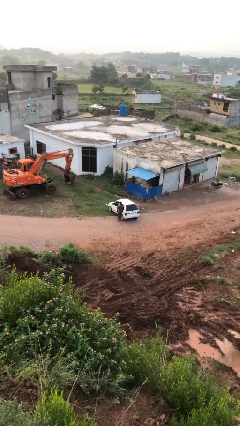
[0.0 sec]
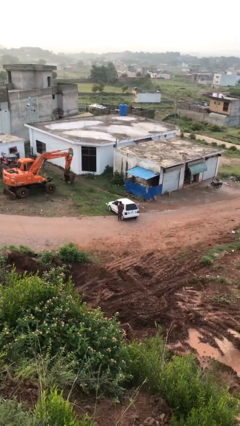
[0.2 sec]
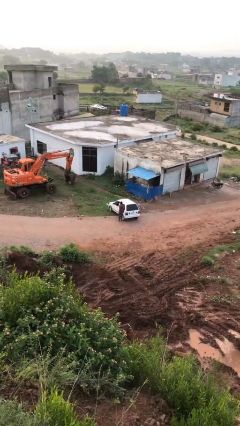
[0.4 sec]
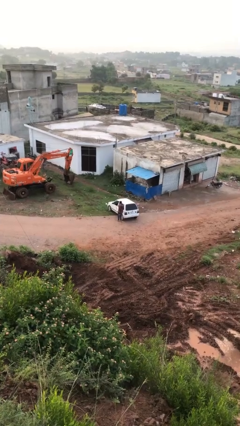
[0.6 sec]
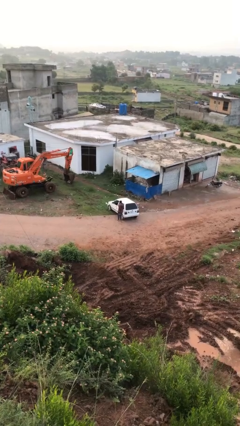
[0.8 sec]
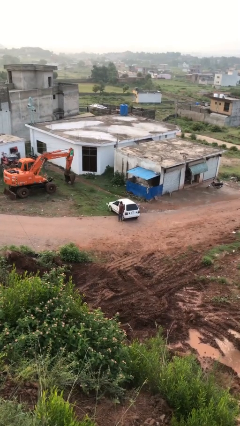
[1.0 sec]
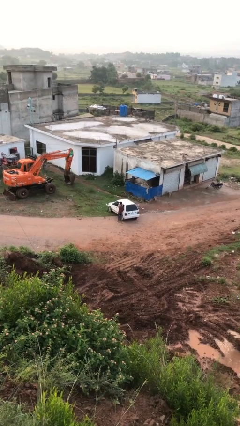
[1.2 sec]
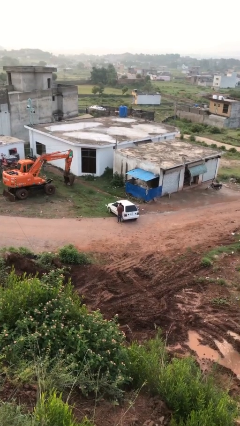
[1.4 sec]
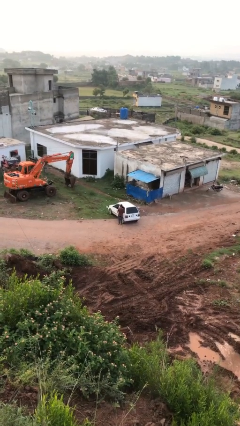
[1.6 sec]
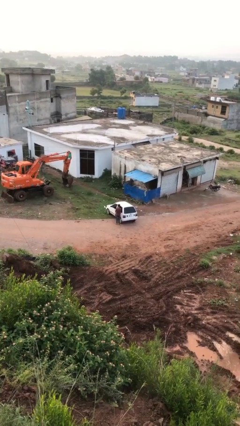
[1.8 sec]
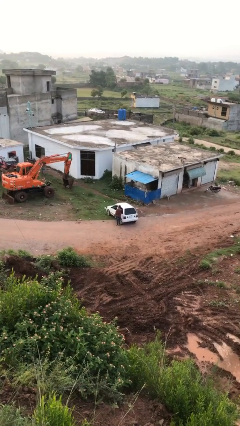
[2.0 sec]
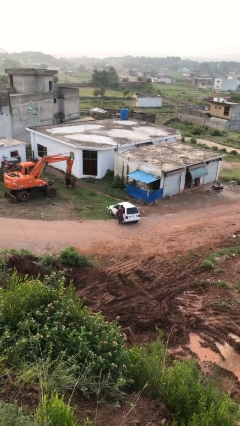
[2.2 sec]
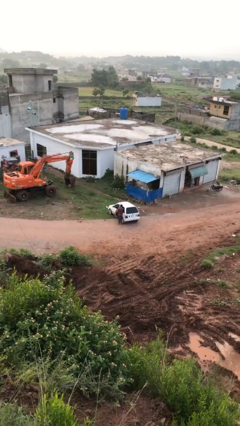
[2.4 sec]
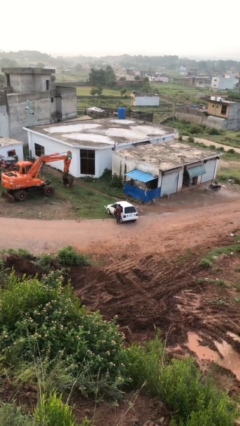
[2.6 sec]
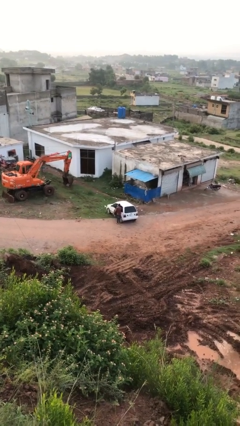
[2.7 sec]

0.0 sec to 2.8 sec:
person opens car door

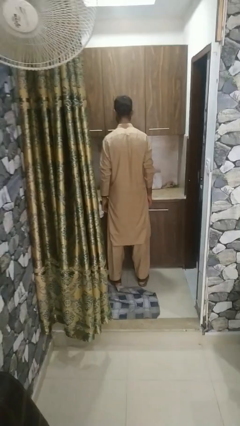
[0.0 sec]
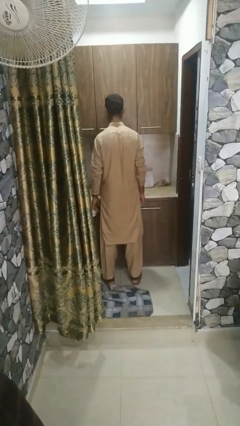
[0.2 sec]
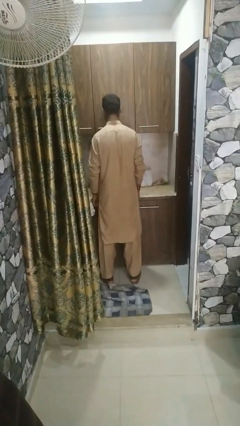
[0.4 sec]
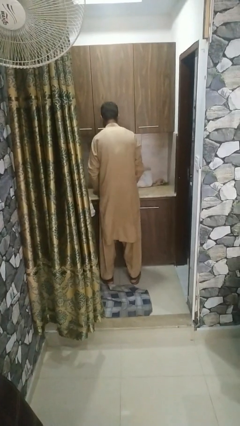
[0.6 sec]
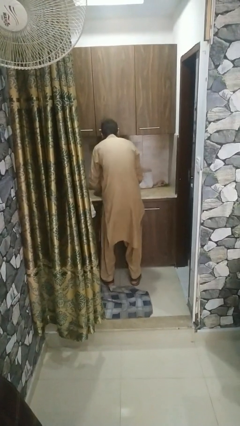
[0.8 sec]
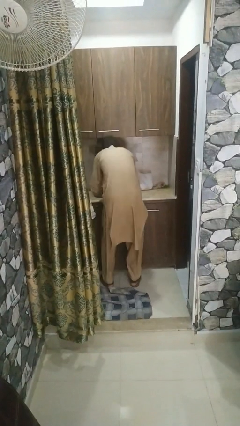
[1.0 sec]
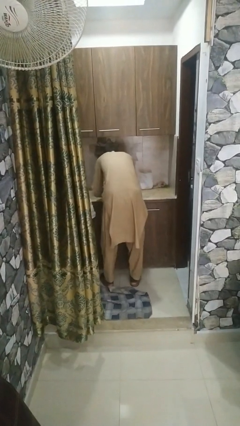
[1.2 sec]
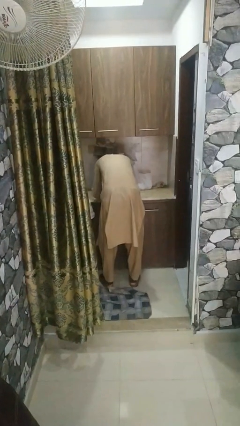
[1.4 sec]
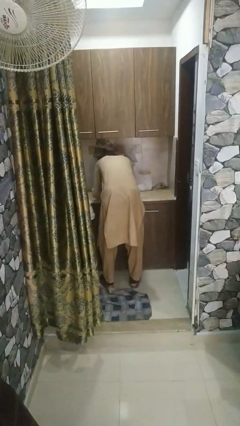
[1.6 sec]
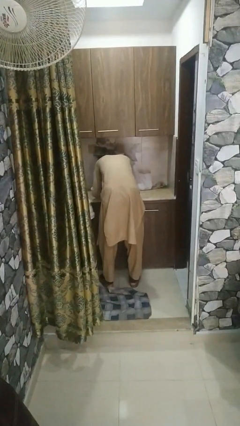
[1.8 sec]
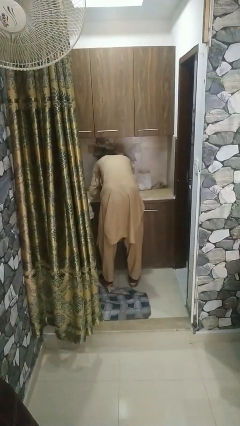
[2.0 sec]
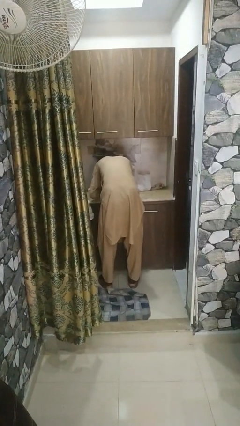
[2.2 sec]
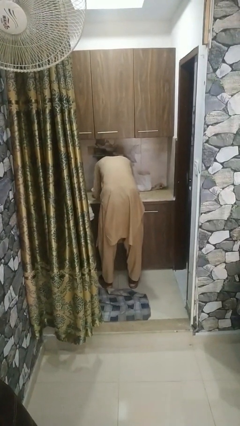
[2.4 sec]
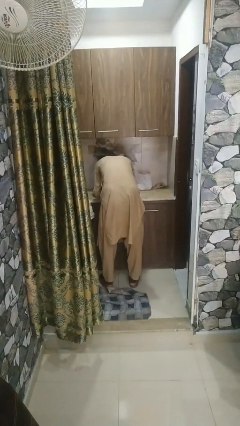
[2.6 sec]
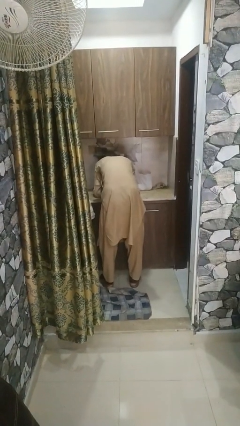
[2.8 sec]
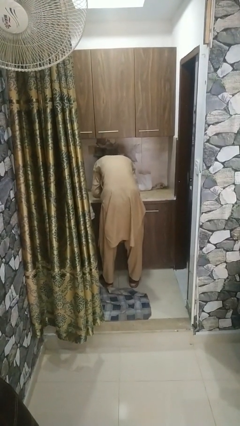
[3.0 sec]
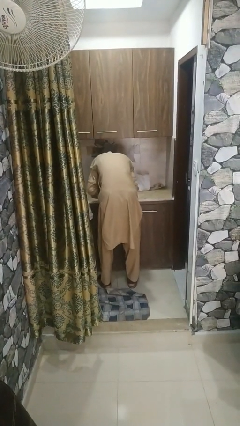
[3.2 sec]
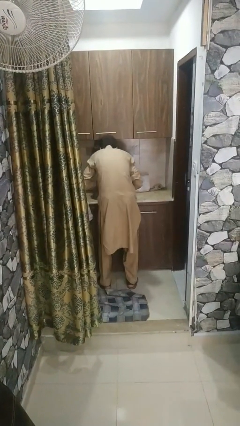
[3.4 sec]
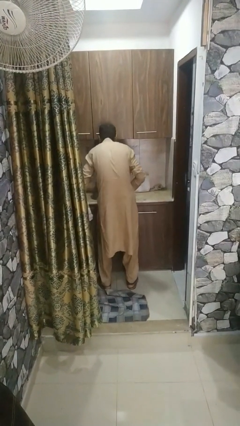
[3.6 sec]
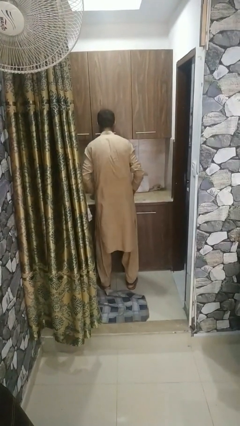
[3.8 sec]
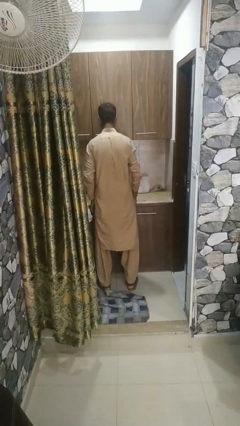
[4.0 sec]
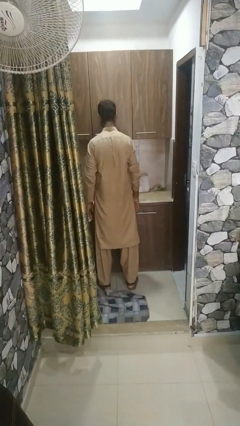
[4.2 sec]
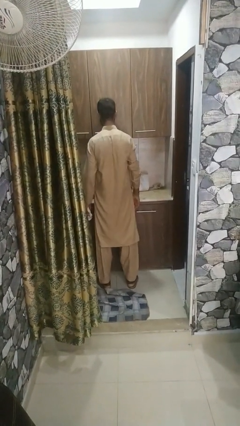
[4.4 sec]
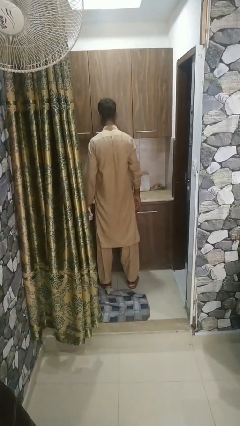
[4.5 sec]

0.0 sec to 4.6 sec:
person washes face

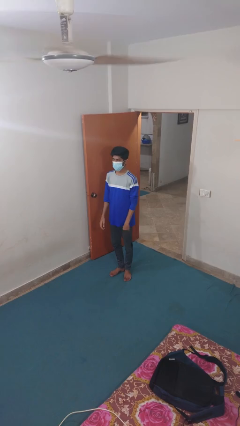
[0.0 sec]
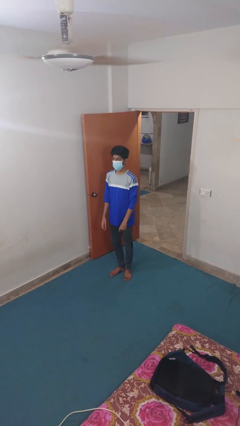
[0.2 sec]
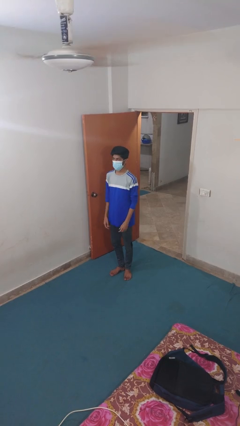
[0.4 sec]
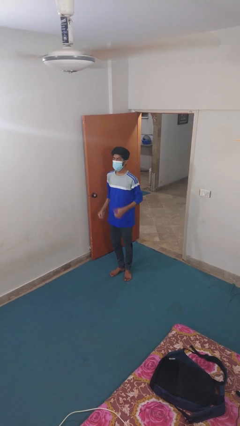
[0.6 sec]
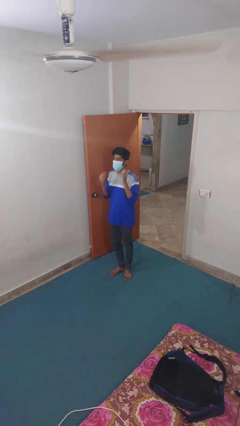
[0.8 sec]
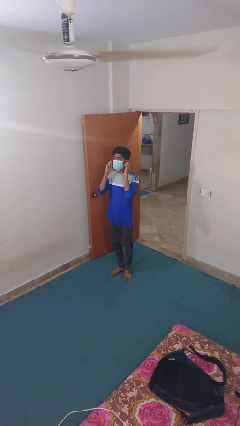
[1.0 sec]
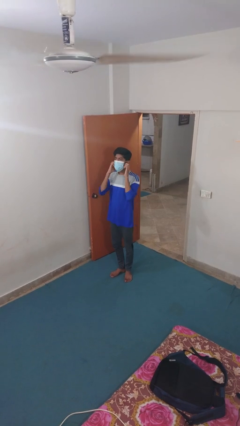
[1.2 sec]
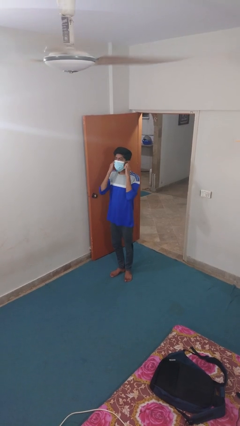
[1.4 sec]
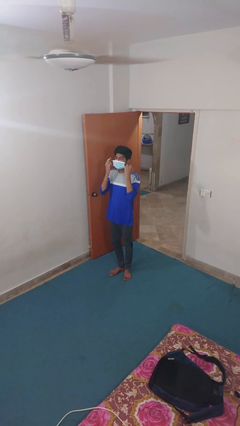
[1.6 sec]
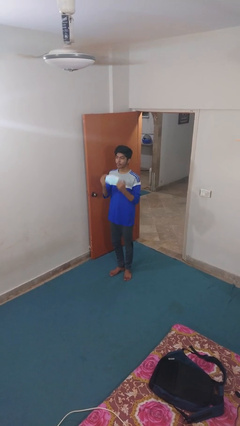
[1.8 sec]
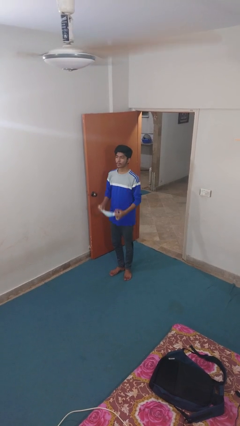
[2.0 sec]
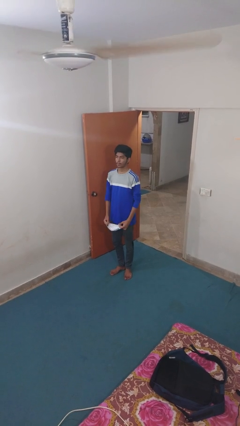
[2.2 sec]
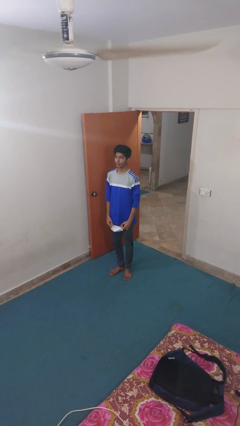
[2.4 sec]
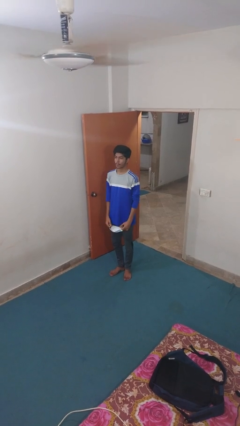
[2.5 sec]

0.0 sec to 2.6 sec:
person takes off facemask

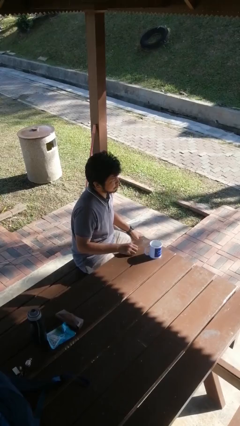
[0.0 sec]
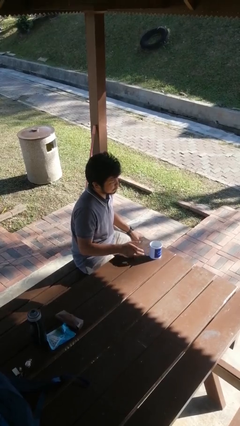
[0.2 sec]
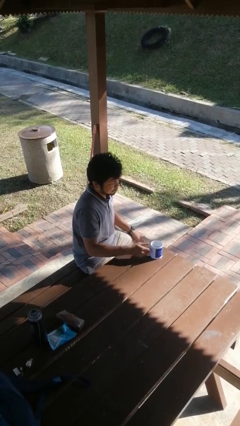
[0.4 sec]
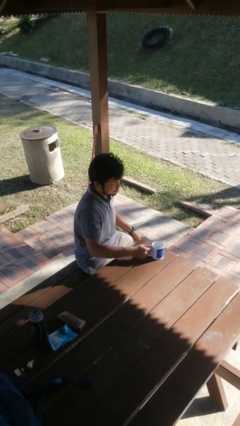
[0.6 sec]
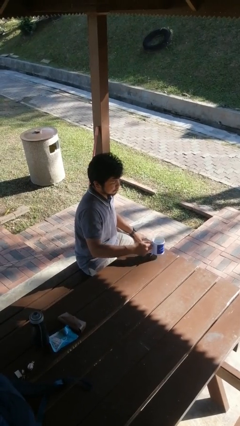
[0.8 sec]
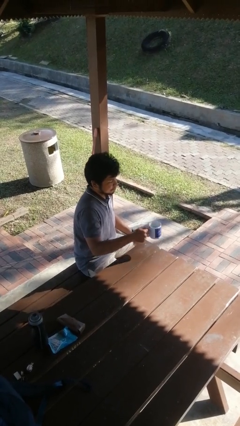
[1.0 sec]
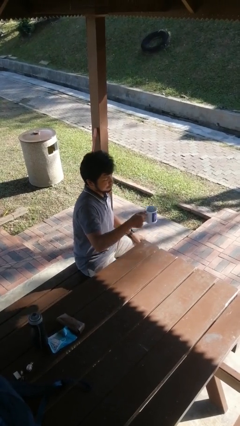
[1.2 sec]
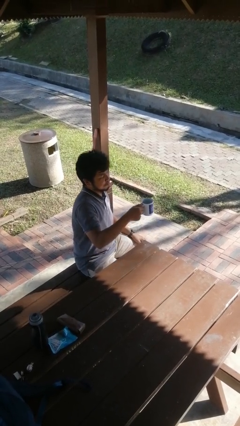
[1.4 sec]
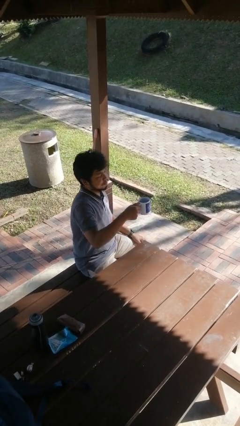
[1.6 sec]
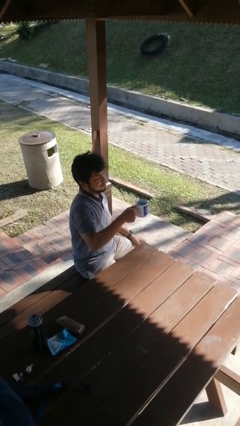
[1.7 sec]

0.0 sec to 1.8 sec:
person picks up object from table

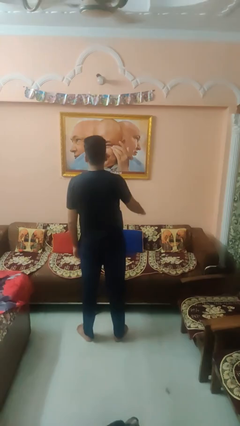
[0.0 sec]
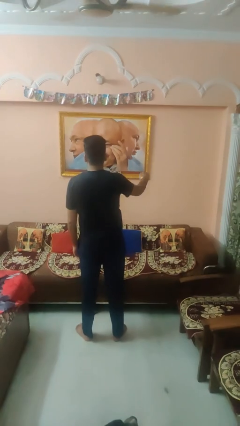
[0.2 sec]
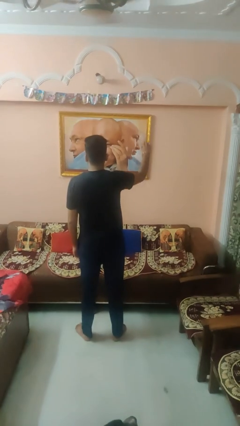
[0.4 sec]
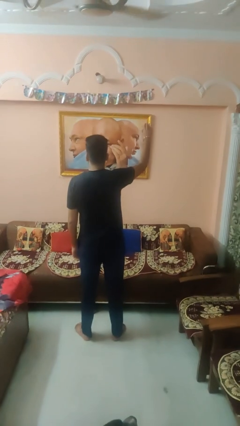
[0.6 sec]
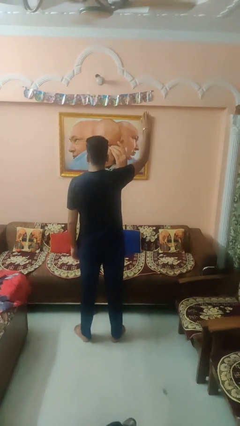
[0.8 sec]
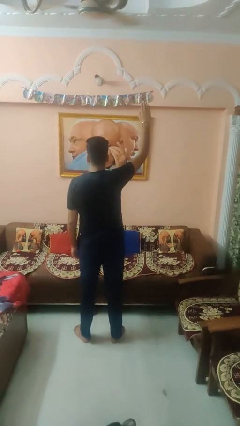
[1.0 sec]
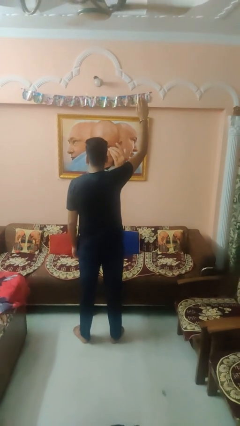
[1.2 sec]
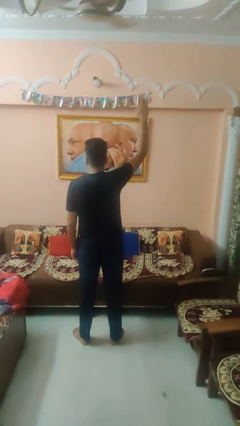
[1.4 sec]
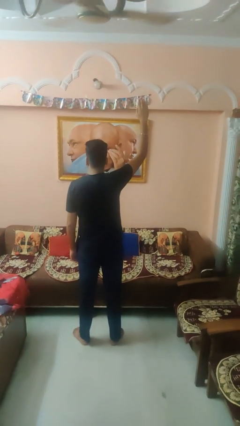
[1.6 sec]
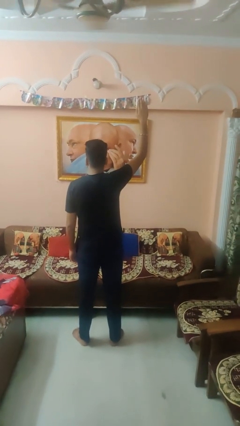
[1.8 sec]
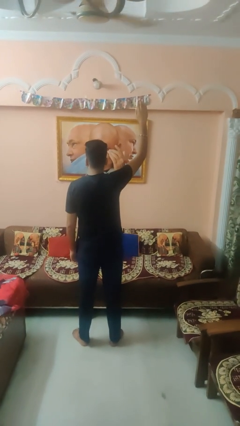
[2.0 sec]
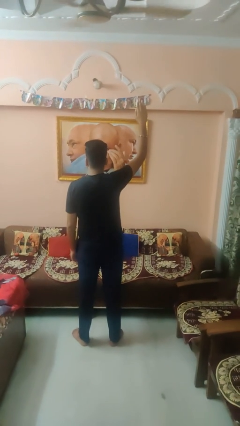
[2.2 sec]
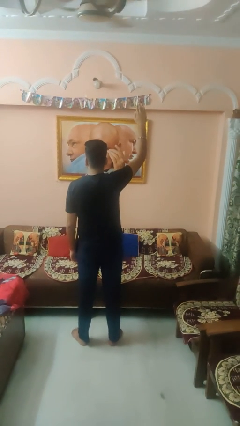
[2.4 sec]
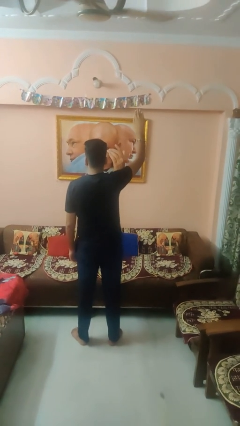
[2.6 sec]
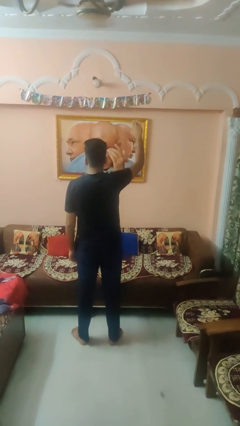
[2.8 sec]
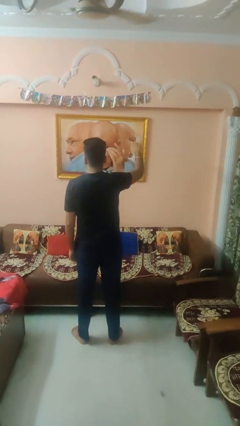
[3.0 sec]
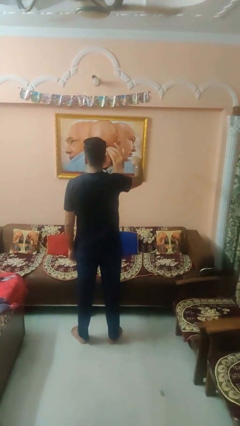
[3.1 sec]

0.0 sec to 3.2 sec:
person gestures raise hand

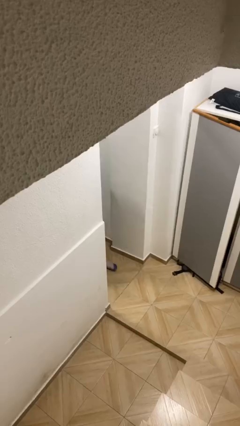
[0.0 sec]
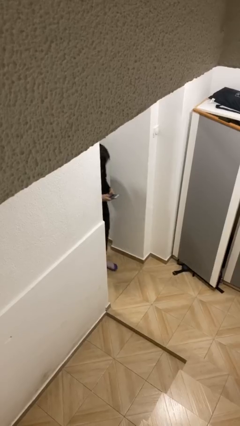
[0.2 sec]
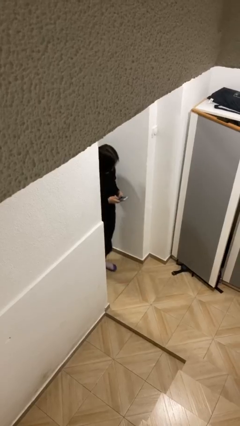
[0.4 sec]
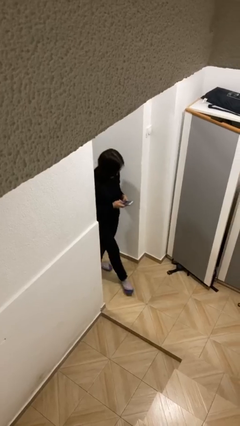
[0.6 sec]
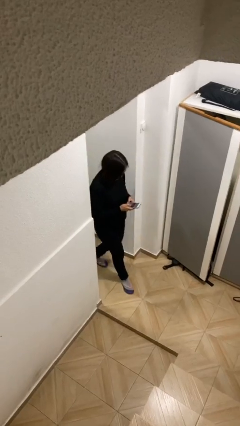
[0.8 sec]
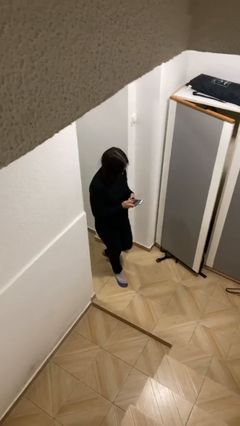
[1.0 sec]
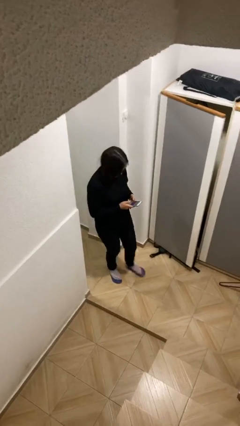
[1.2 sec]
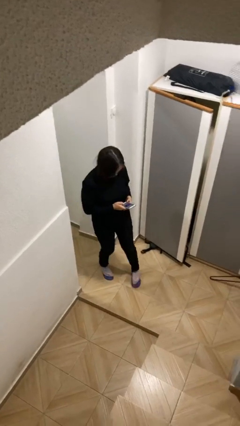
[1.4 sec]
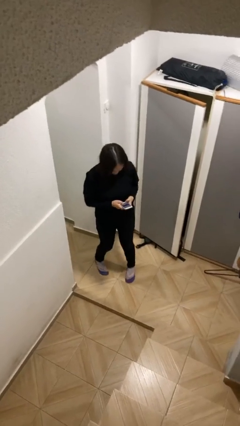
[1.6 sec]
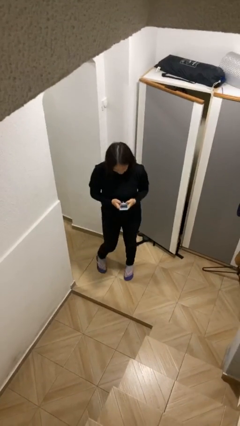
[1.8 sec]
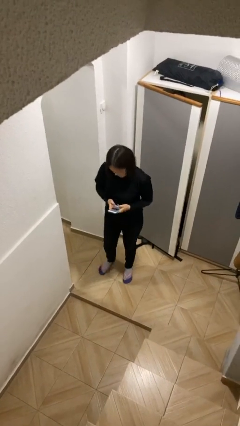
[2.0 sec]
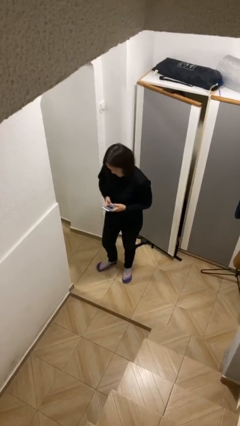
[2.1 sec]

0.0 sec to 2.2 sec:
person enters scene through structure

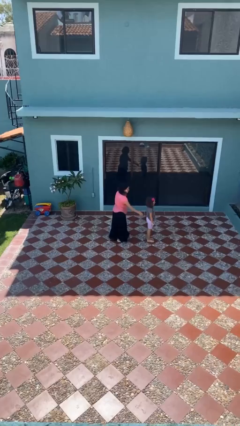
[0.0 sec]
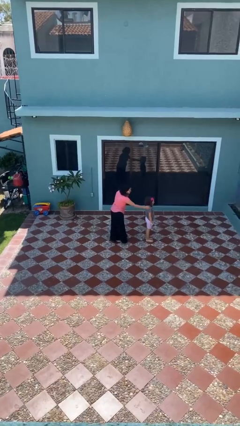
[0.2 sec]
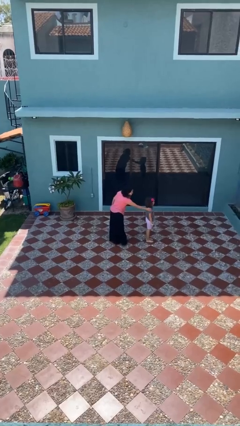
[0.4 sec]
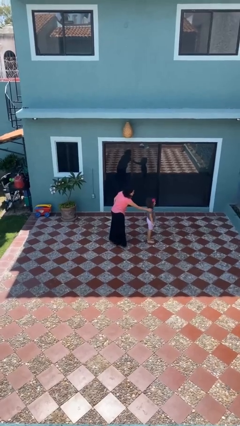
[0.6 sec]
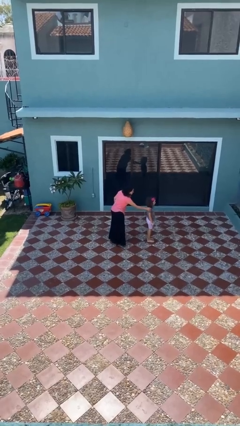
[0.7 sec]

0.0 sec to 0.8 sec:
person grabs person by shoulder
